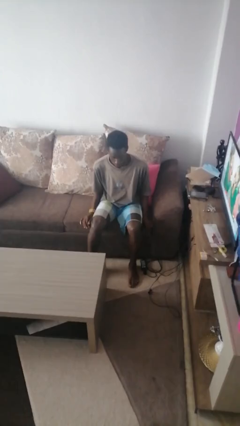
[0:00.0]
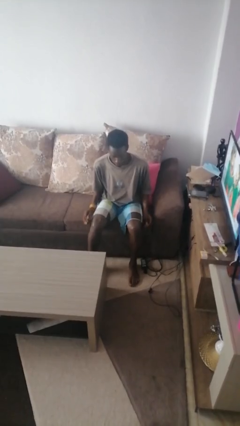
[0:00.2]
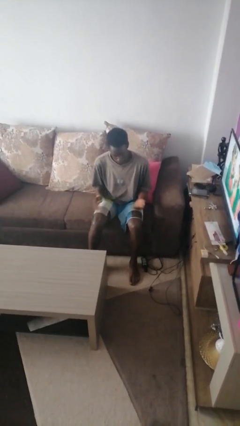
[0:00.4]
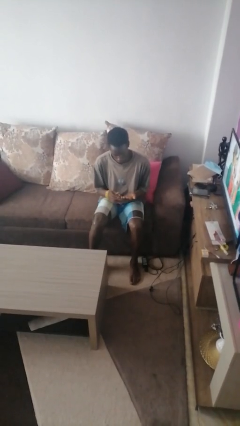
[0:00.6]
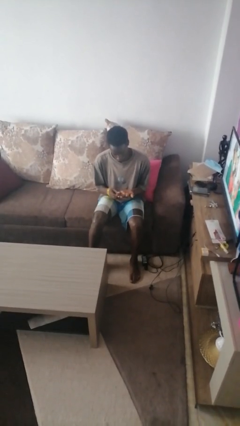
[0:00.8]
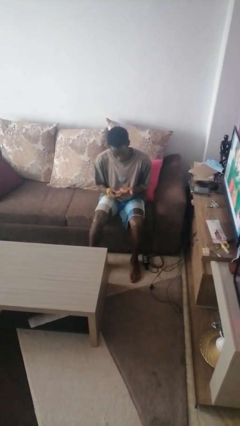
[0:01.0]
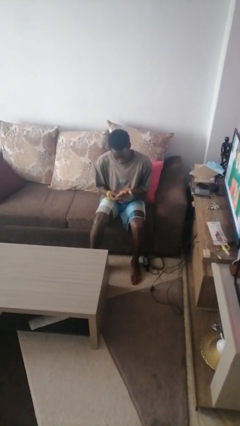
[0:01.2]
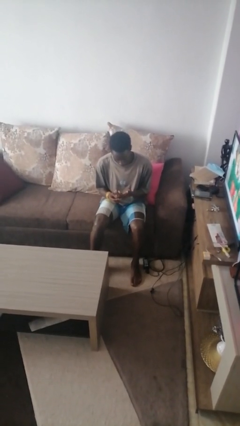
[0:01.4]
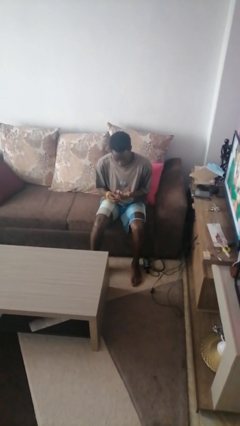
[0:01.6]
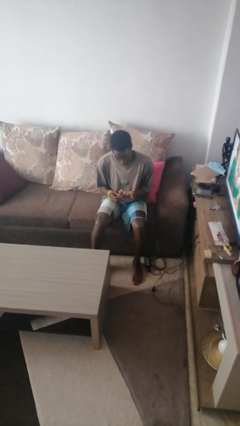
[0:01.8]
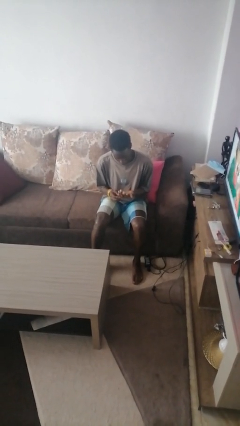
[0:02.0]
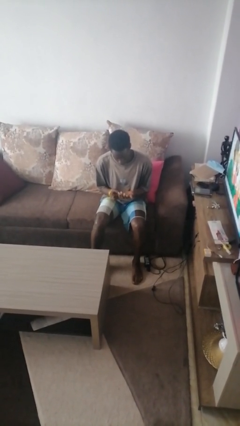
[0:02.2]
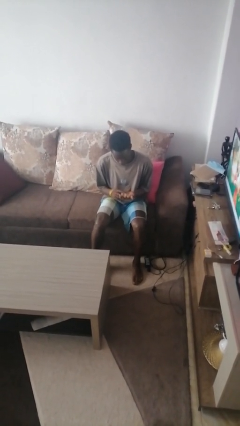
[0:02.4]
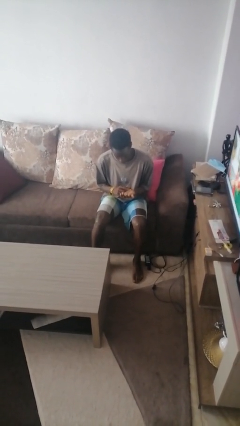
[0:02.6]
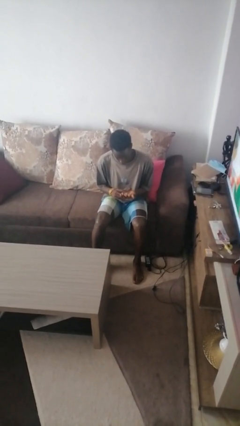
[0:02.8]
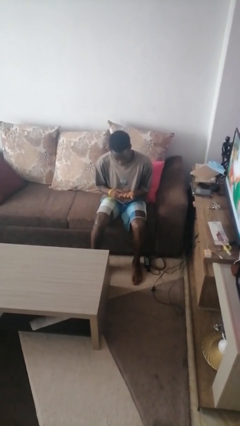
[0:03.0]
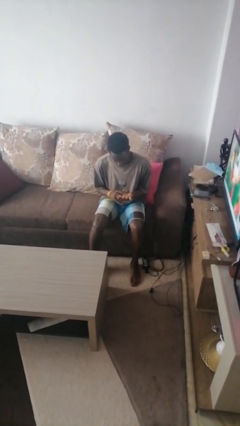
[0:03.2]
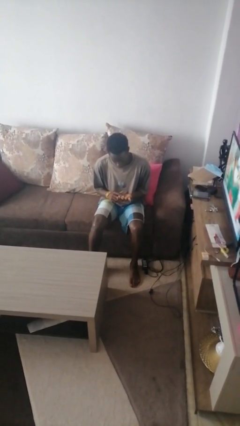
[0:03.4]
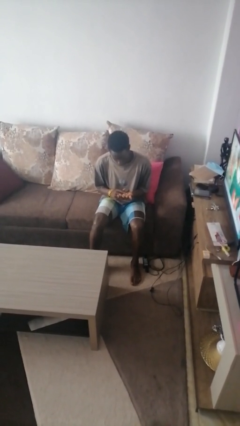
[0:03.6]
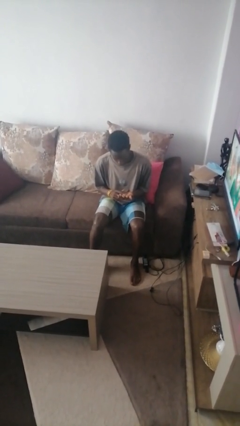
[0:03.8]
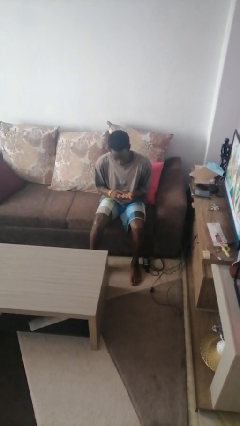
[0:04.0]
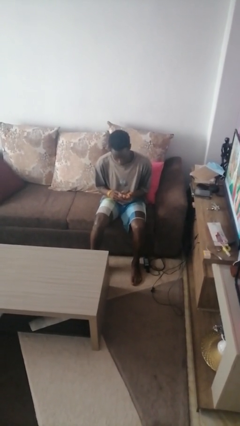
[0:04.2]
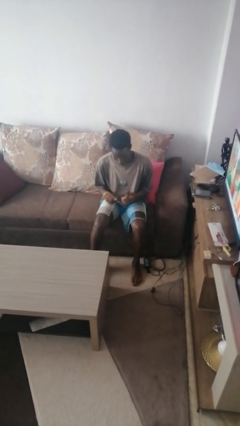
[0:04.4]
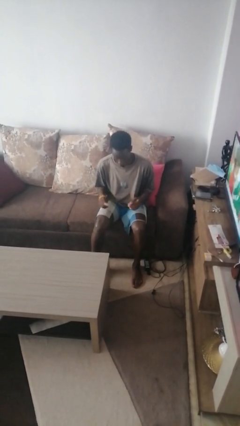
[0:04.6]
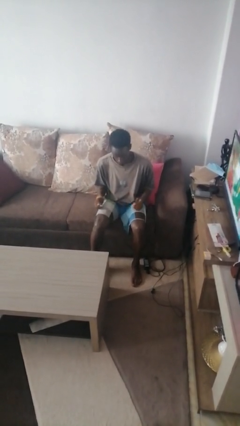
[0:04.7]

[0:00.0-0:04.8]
person looks at hands in lap

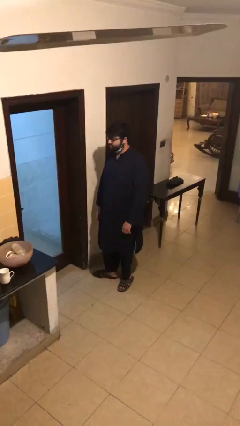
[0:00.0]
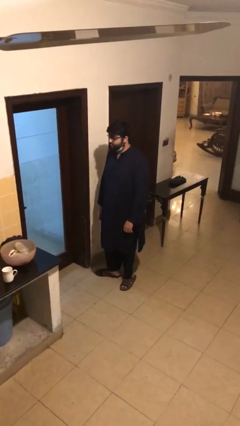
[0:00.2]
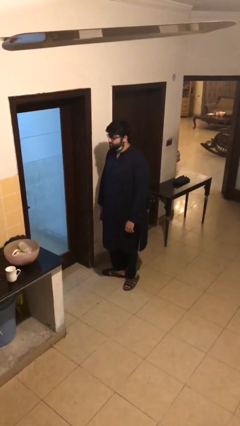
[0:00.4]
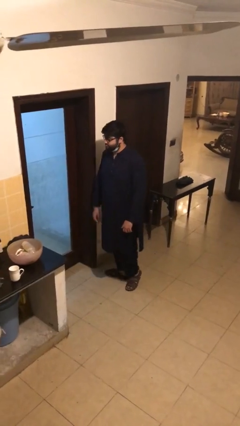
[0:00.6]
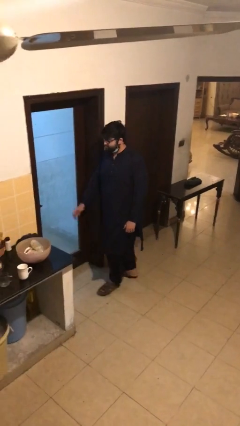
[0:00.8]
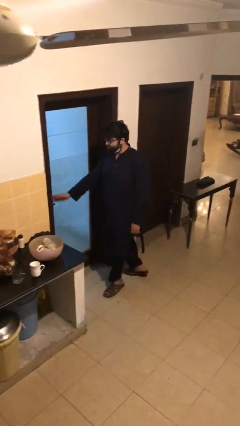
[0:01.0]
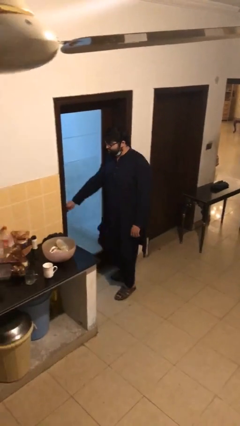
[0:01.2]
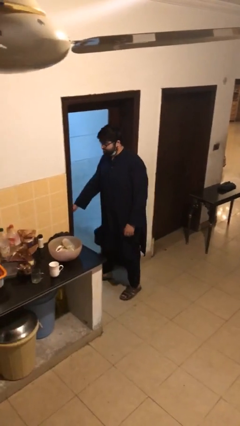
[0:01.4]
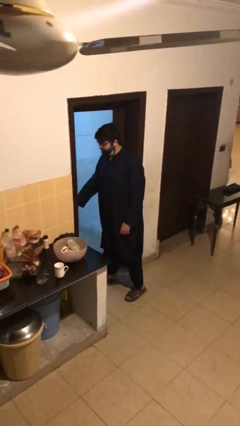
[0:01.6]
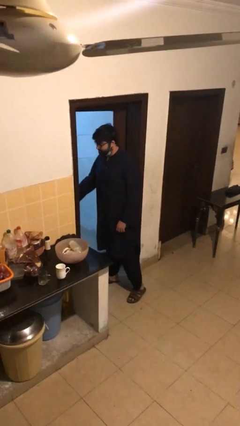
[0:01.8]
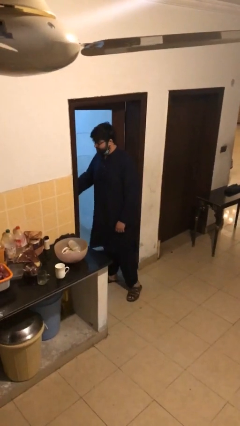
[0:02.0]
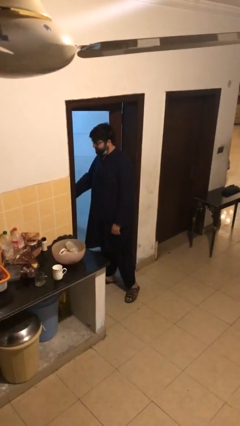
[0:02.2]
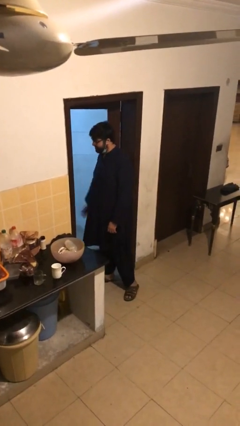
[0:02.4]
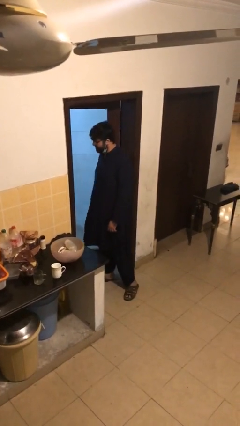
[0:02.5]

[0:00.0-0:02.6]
person opens facility door

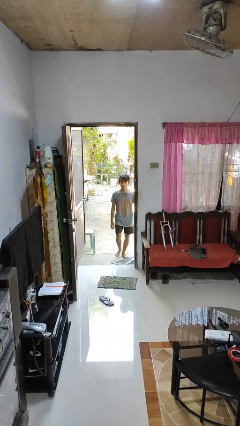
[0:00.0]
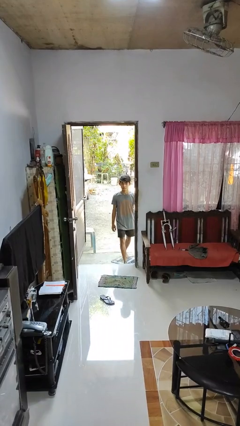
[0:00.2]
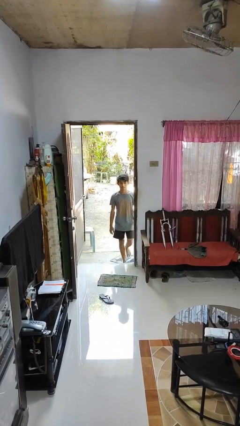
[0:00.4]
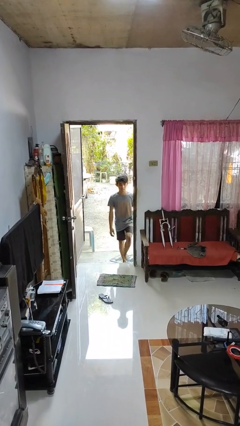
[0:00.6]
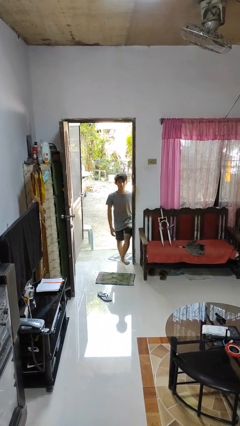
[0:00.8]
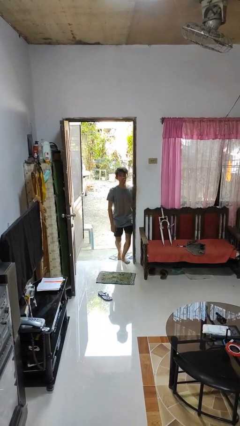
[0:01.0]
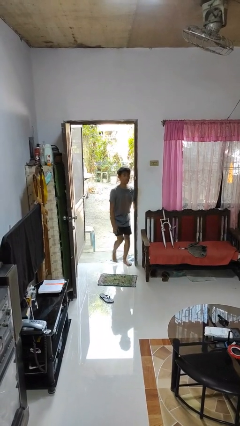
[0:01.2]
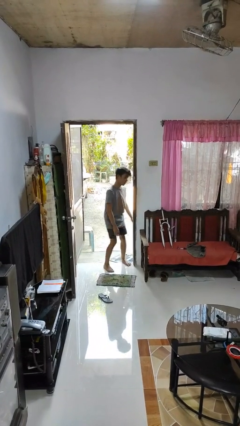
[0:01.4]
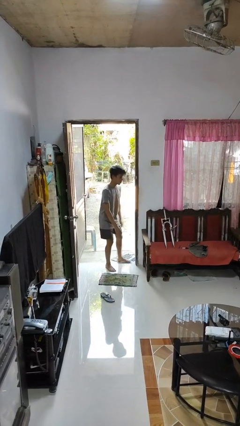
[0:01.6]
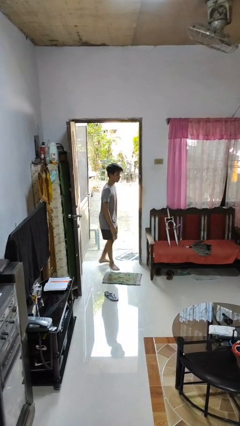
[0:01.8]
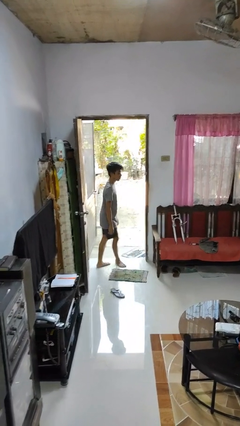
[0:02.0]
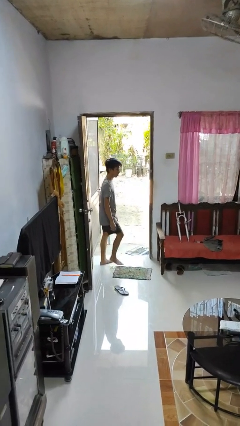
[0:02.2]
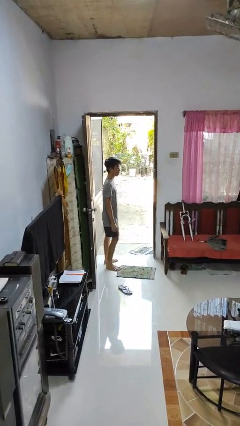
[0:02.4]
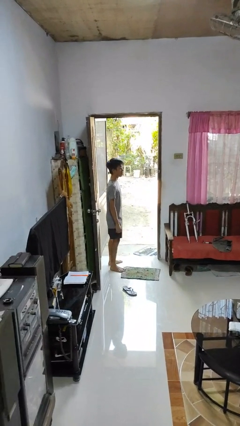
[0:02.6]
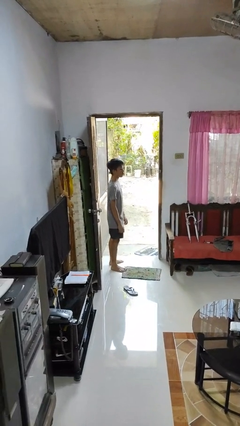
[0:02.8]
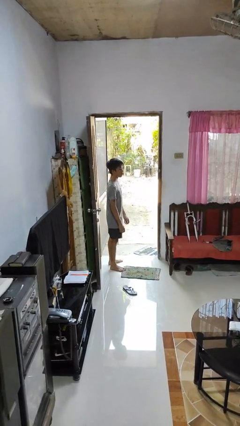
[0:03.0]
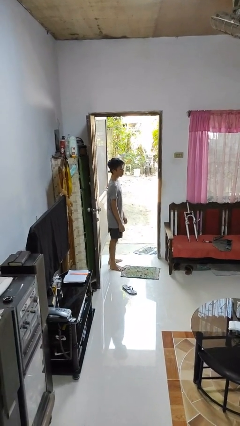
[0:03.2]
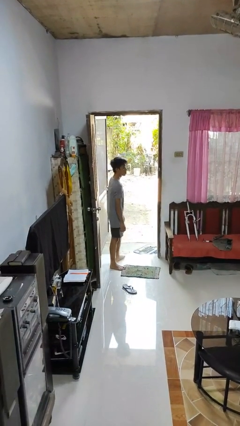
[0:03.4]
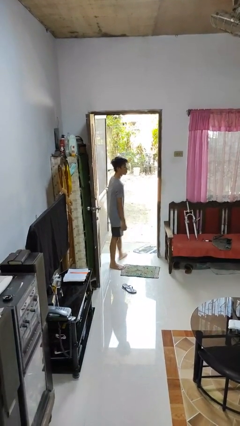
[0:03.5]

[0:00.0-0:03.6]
person bumps into wall

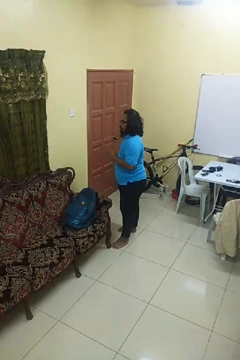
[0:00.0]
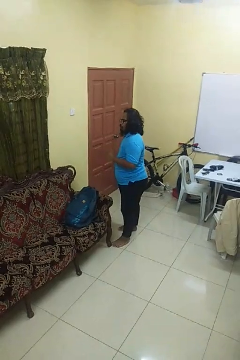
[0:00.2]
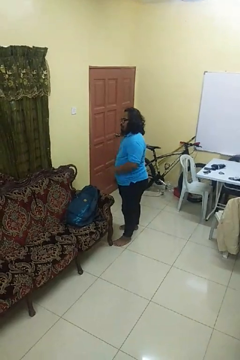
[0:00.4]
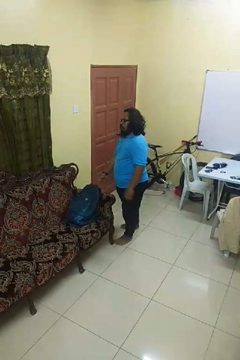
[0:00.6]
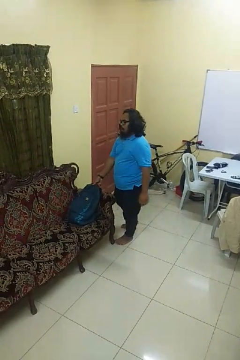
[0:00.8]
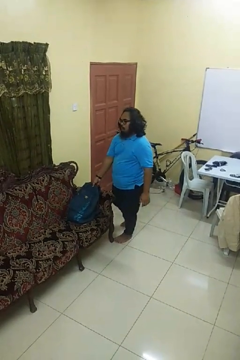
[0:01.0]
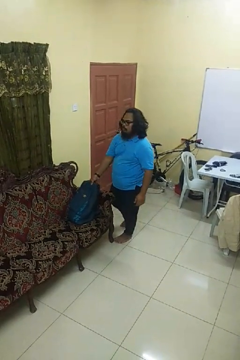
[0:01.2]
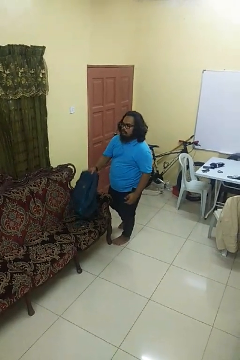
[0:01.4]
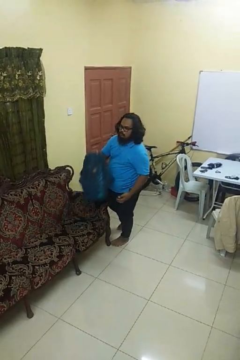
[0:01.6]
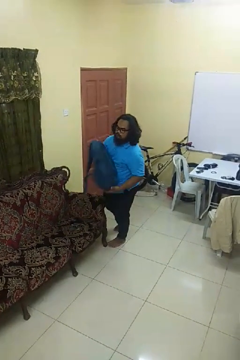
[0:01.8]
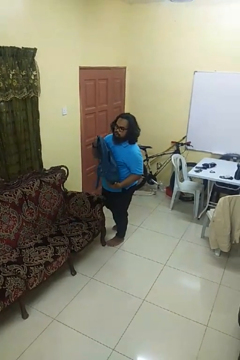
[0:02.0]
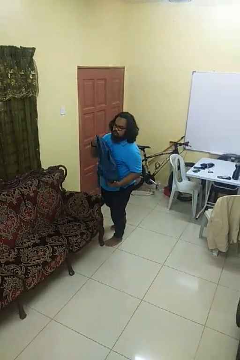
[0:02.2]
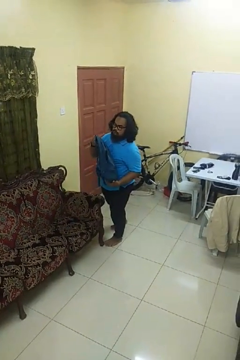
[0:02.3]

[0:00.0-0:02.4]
person picks up object from couch

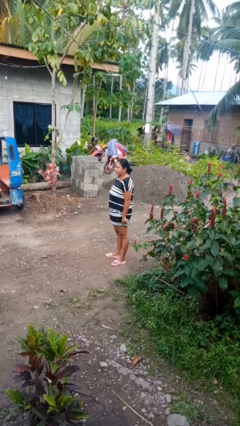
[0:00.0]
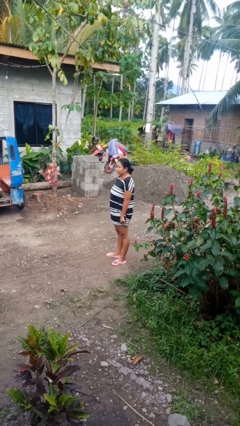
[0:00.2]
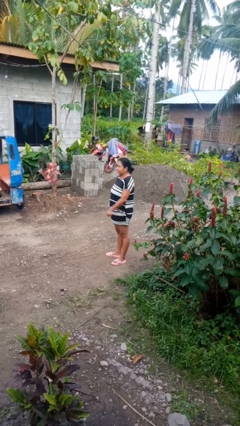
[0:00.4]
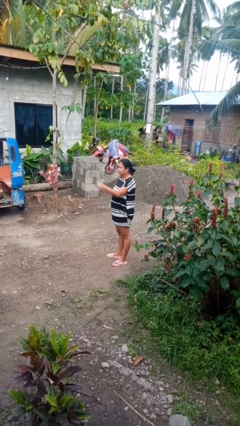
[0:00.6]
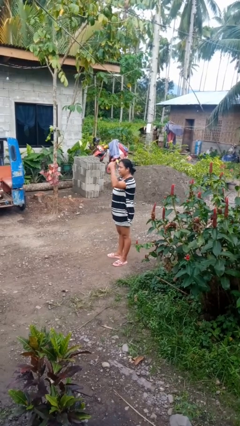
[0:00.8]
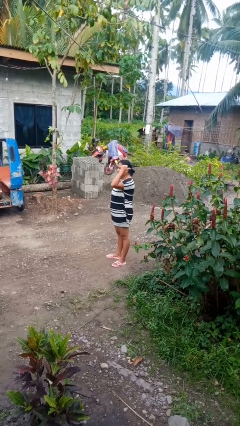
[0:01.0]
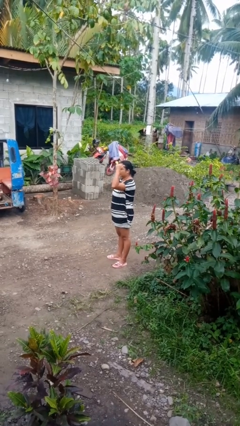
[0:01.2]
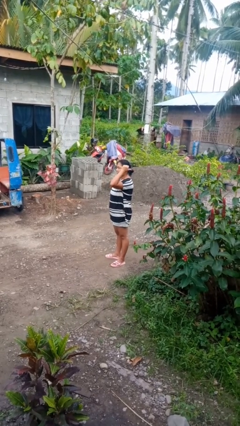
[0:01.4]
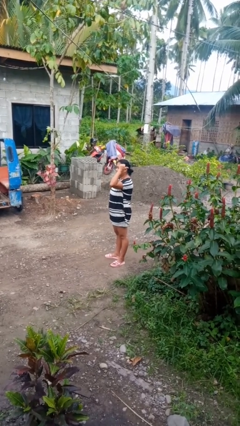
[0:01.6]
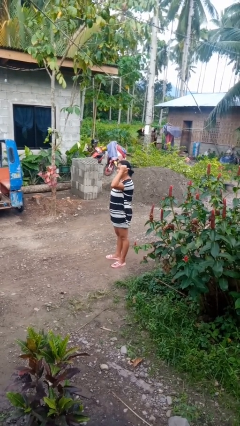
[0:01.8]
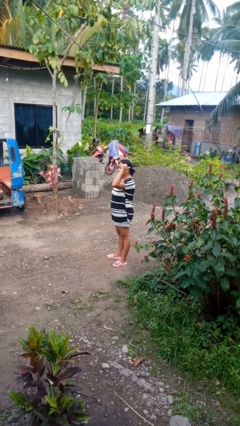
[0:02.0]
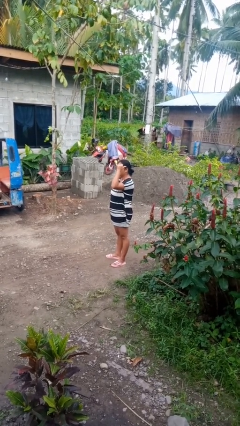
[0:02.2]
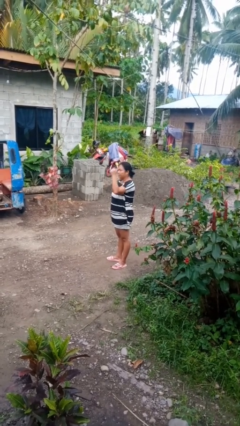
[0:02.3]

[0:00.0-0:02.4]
person gestures behind me

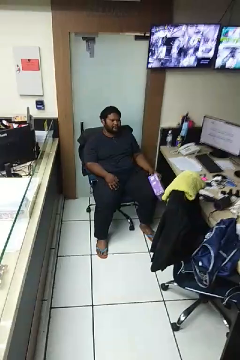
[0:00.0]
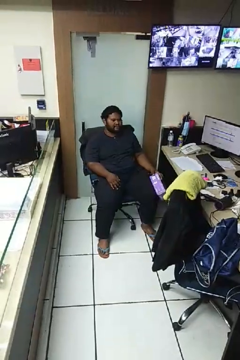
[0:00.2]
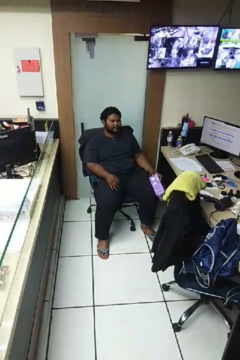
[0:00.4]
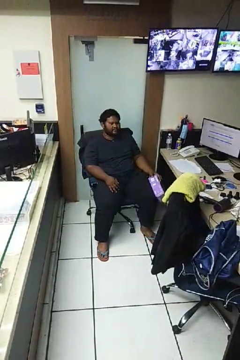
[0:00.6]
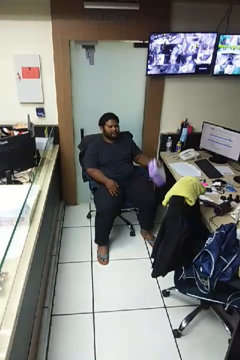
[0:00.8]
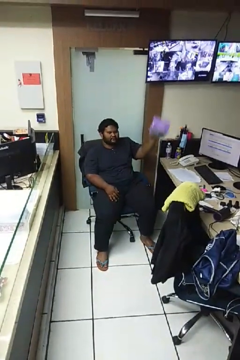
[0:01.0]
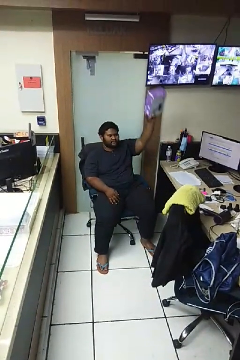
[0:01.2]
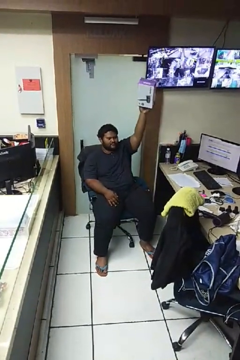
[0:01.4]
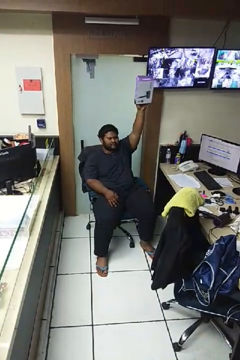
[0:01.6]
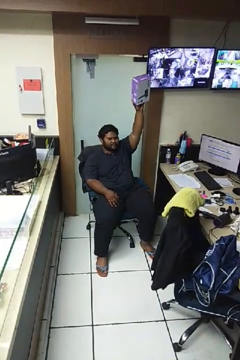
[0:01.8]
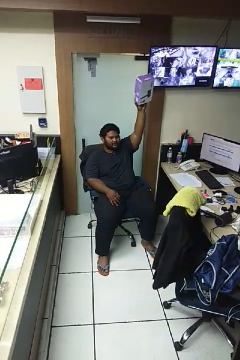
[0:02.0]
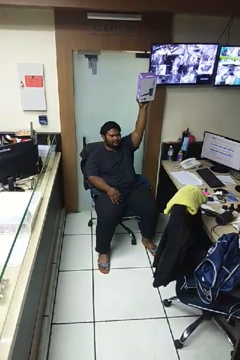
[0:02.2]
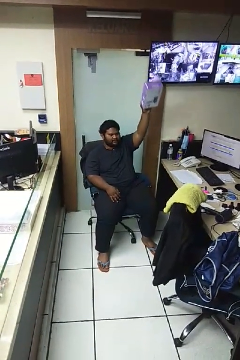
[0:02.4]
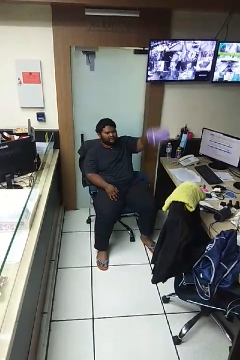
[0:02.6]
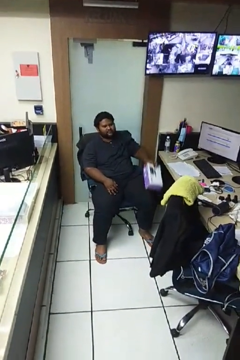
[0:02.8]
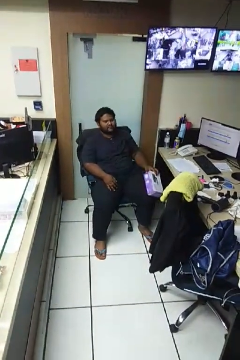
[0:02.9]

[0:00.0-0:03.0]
person holds object above head
